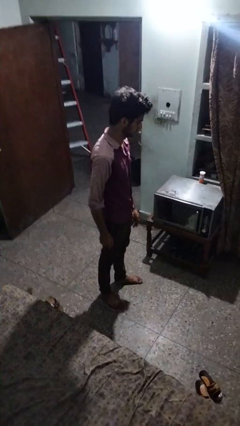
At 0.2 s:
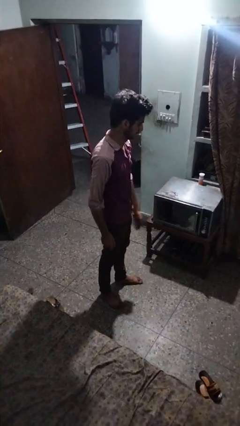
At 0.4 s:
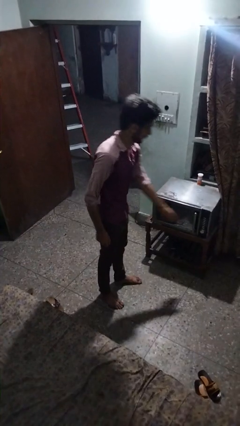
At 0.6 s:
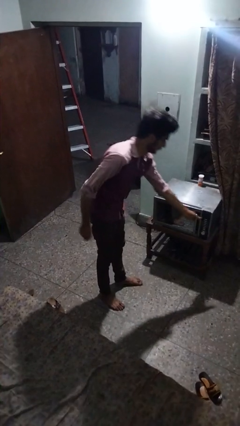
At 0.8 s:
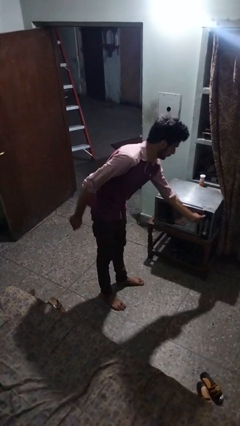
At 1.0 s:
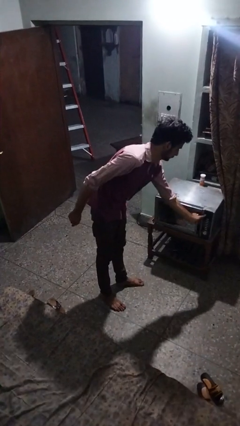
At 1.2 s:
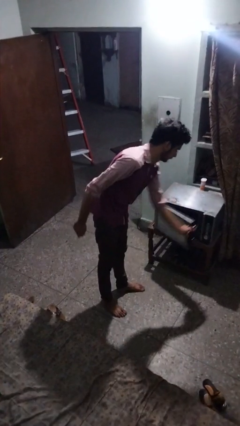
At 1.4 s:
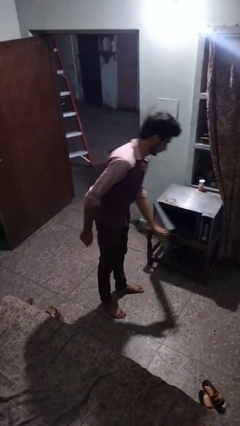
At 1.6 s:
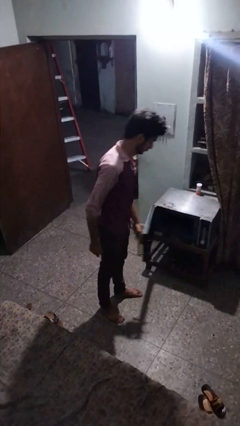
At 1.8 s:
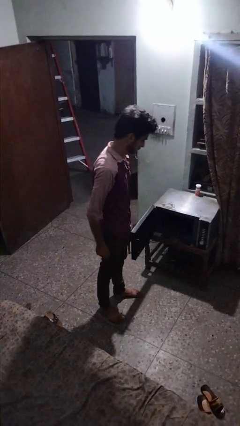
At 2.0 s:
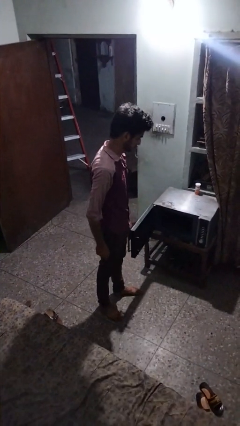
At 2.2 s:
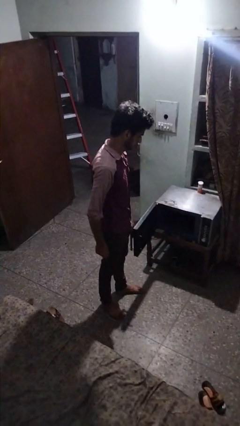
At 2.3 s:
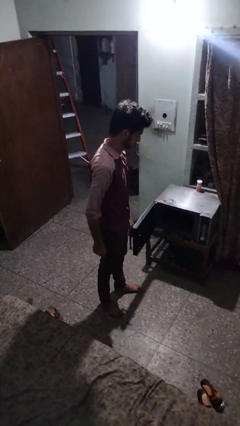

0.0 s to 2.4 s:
person opens microwave

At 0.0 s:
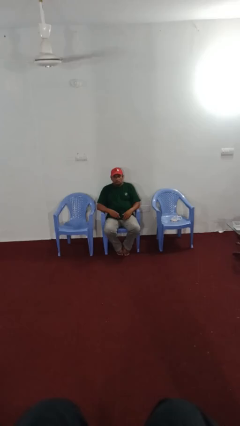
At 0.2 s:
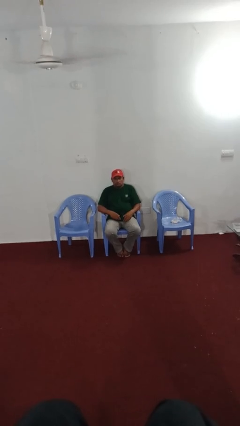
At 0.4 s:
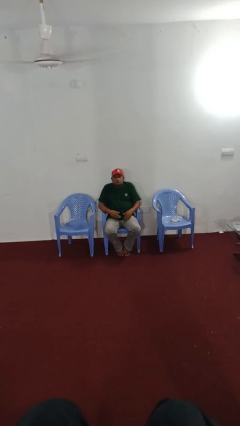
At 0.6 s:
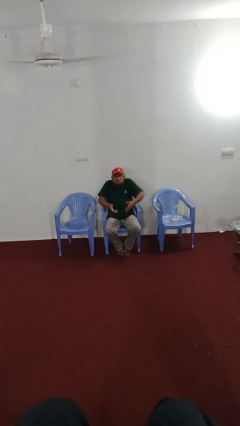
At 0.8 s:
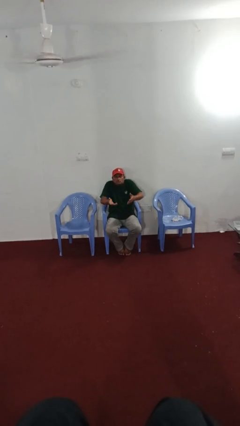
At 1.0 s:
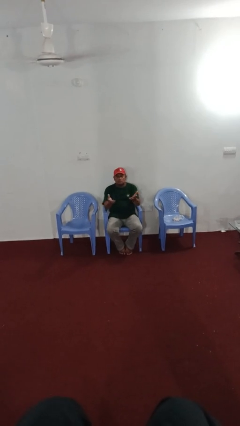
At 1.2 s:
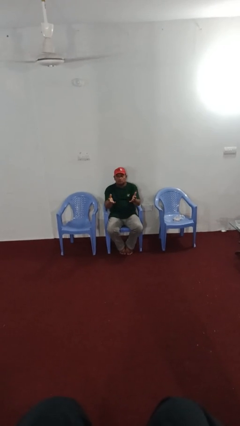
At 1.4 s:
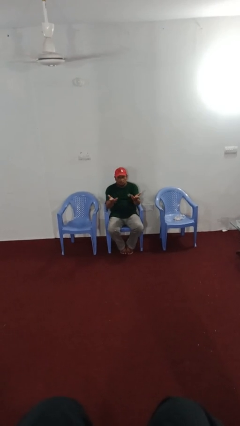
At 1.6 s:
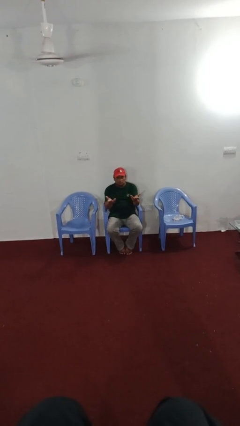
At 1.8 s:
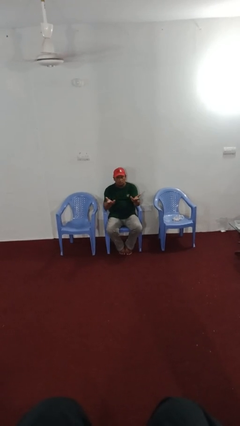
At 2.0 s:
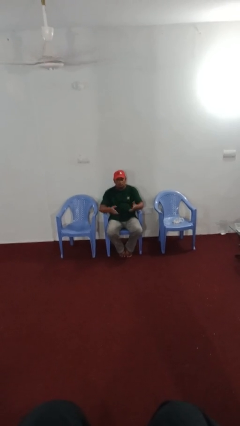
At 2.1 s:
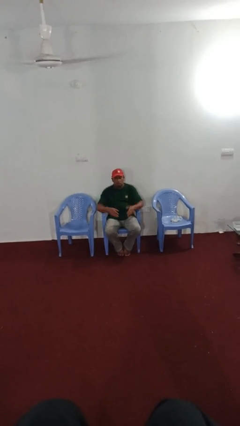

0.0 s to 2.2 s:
person shrugs

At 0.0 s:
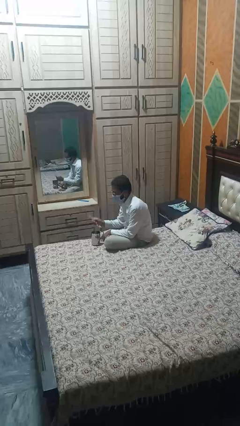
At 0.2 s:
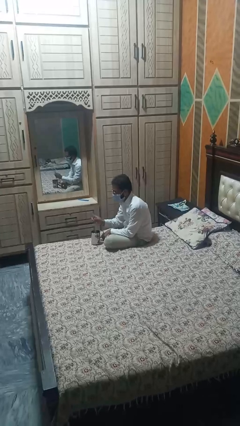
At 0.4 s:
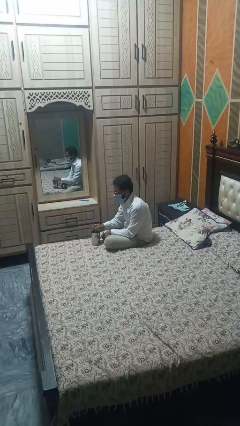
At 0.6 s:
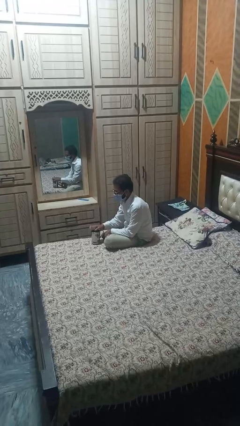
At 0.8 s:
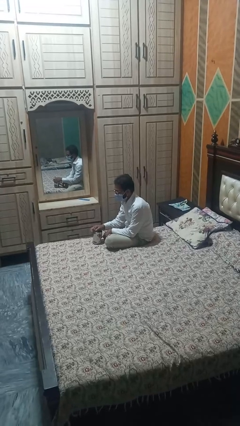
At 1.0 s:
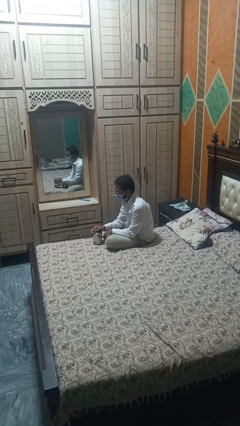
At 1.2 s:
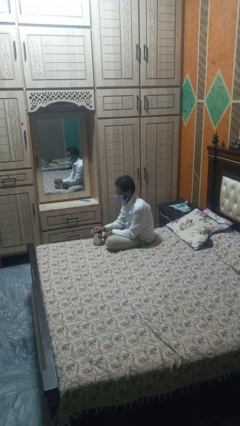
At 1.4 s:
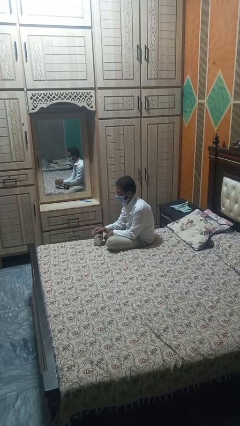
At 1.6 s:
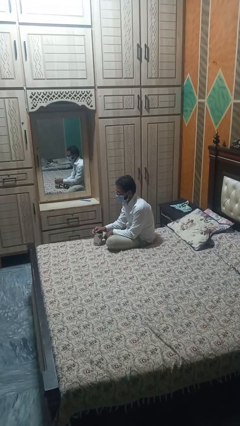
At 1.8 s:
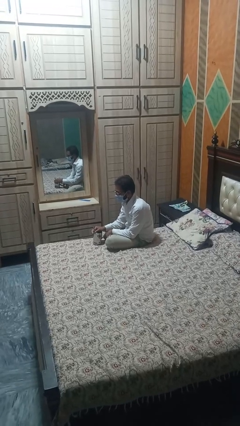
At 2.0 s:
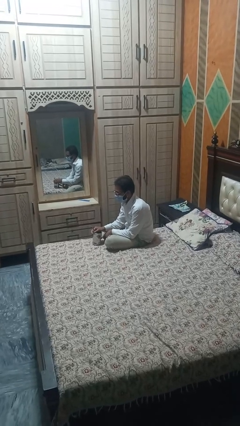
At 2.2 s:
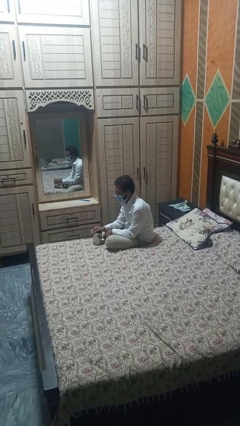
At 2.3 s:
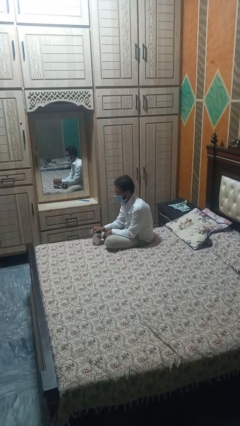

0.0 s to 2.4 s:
person stirs mug

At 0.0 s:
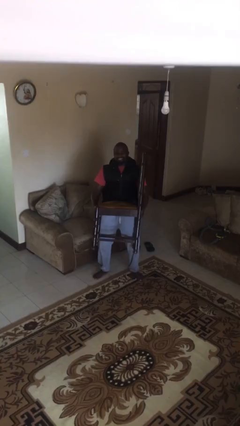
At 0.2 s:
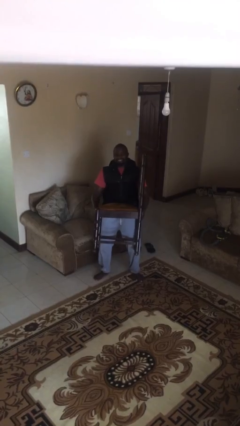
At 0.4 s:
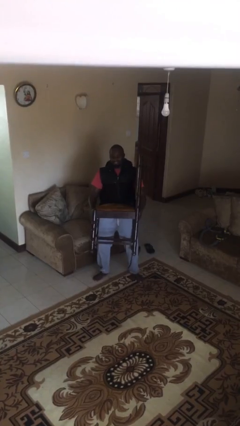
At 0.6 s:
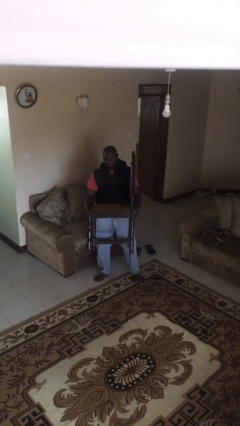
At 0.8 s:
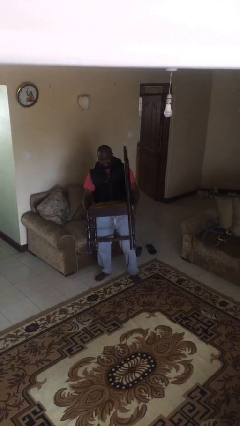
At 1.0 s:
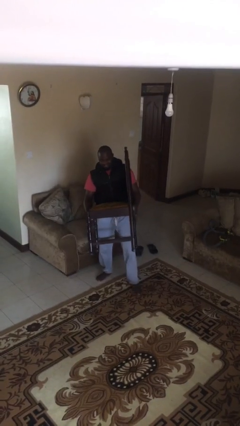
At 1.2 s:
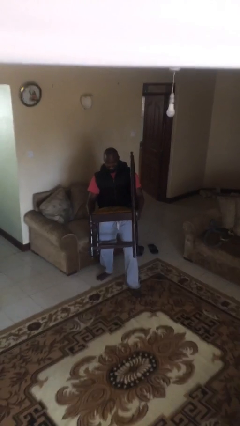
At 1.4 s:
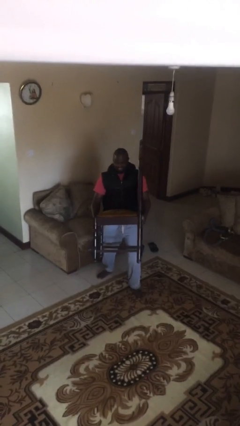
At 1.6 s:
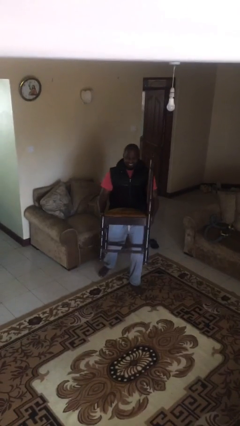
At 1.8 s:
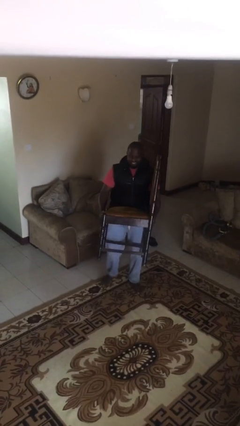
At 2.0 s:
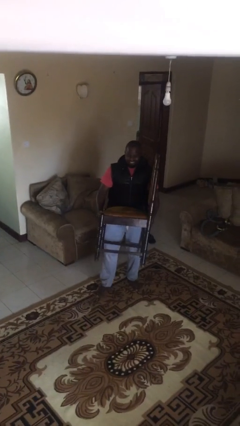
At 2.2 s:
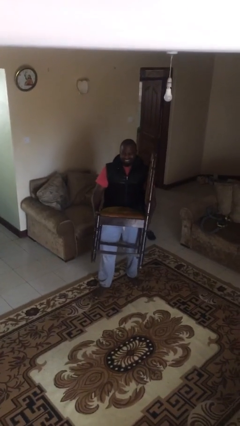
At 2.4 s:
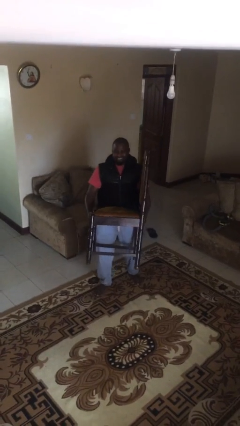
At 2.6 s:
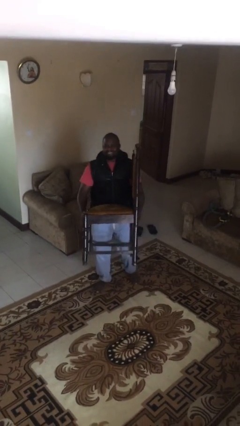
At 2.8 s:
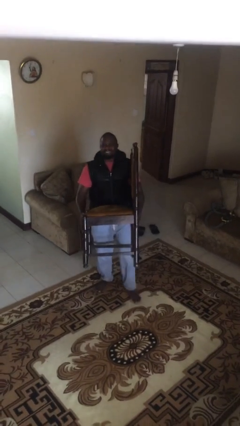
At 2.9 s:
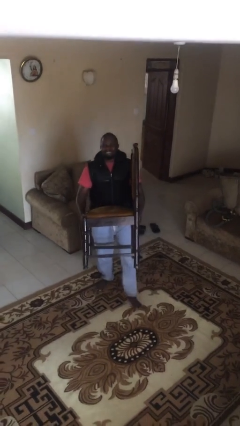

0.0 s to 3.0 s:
person carries heavy object

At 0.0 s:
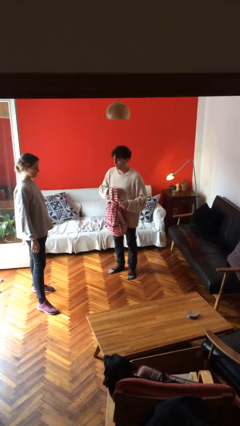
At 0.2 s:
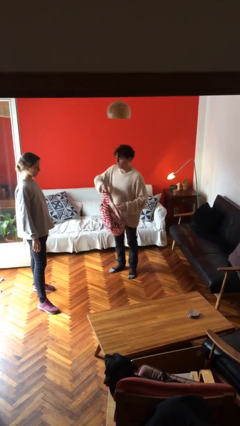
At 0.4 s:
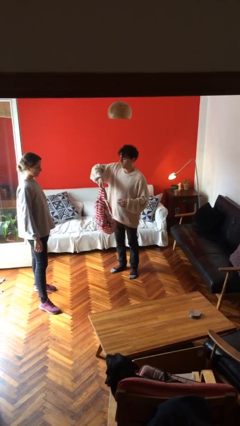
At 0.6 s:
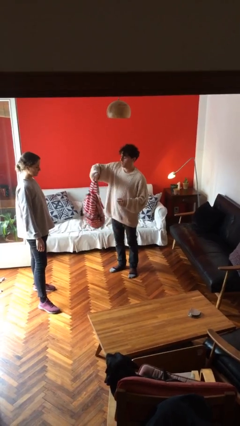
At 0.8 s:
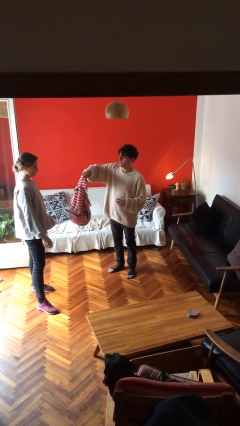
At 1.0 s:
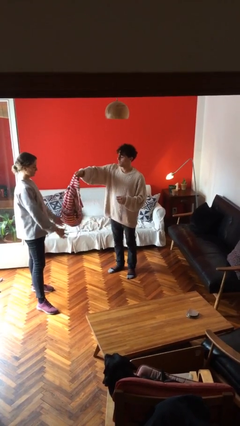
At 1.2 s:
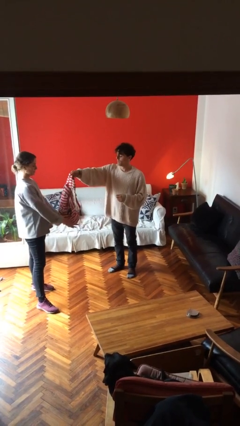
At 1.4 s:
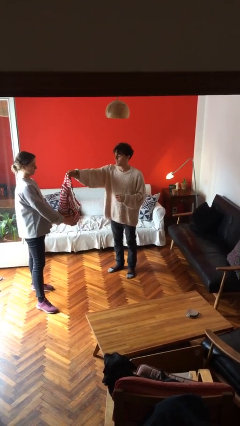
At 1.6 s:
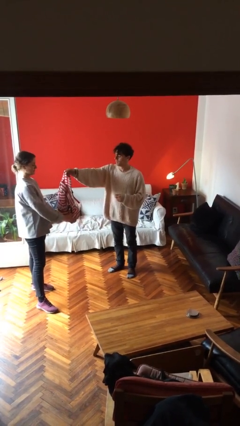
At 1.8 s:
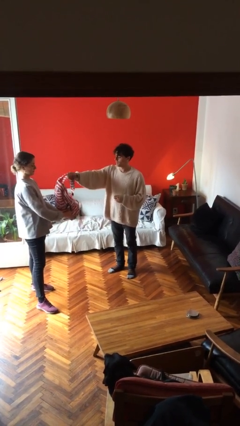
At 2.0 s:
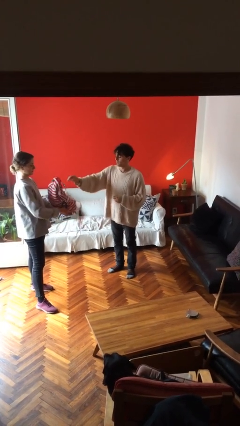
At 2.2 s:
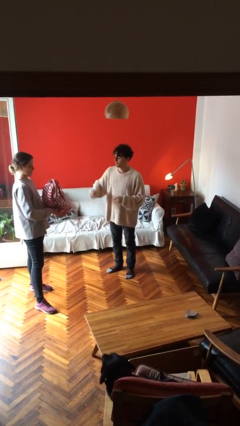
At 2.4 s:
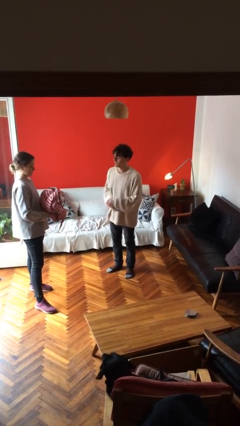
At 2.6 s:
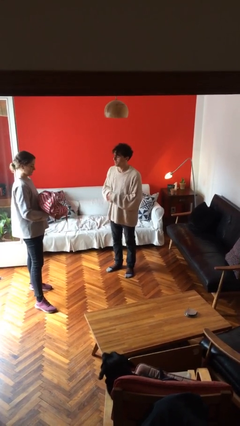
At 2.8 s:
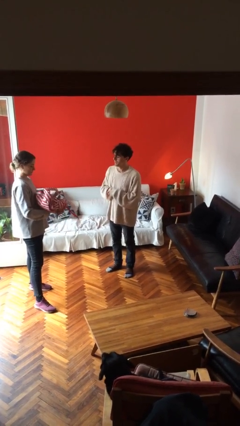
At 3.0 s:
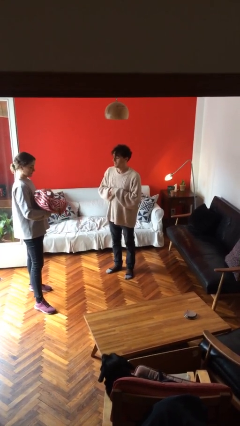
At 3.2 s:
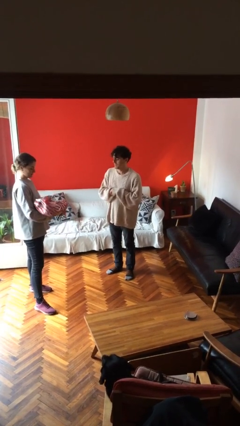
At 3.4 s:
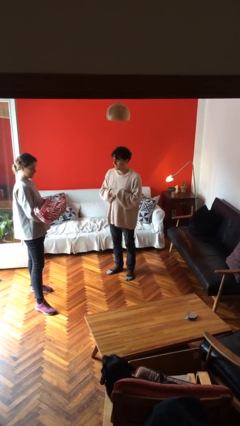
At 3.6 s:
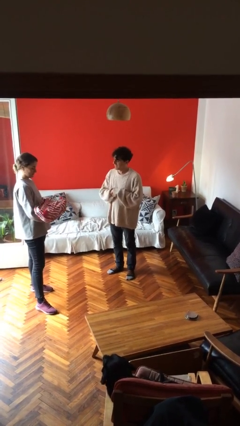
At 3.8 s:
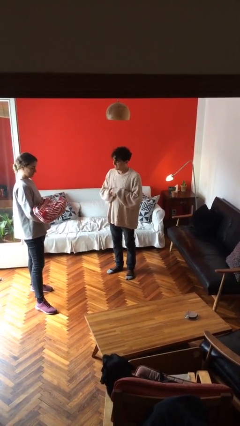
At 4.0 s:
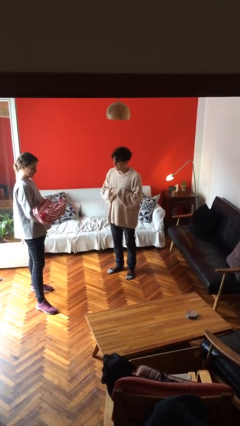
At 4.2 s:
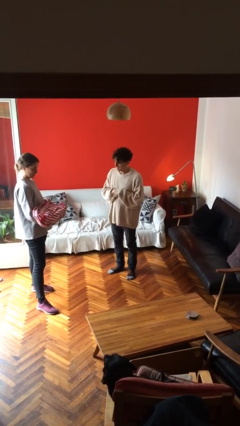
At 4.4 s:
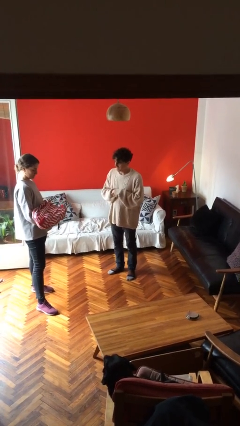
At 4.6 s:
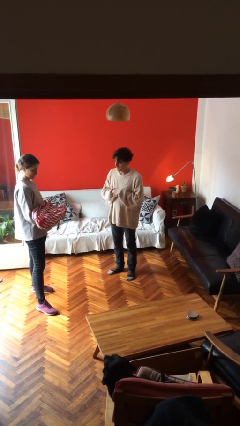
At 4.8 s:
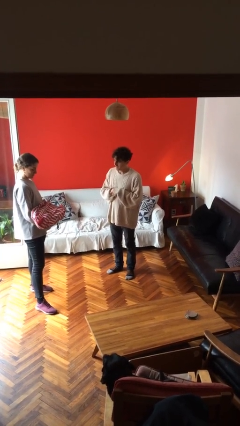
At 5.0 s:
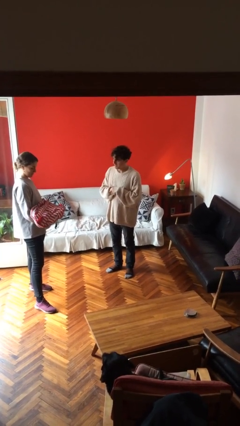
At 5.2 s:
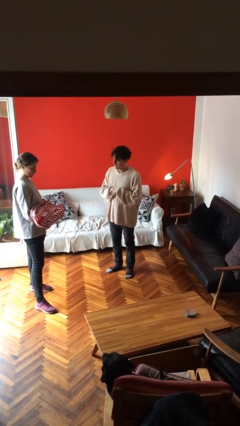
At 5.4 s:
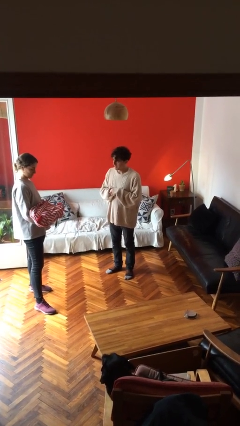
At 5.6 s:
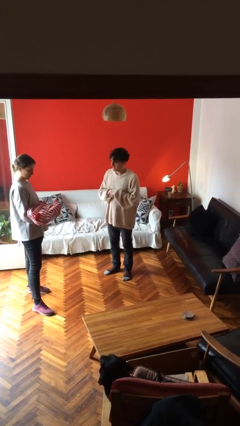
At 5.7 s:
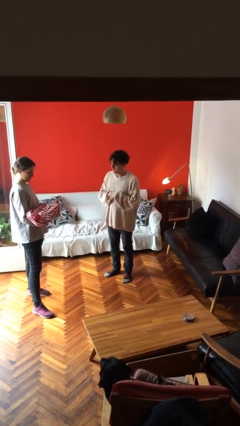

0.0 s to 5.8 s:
person transfers object to person

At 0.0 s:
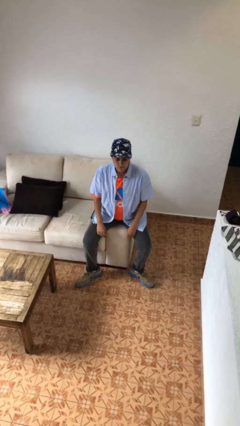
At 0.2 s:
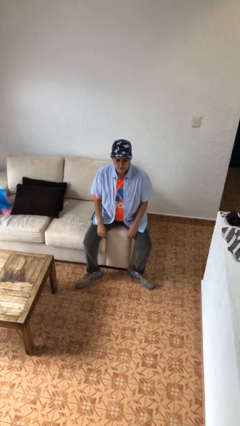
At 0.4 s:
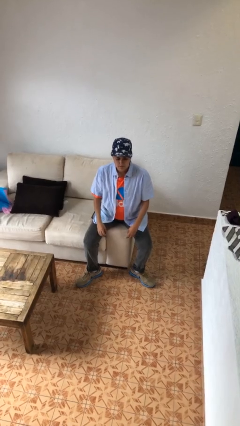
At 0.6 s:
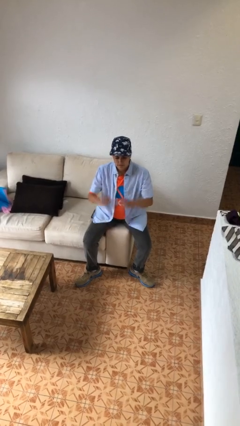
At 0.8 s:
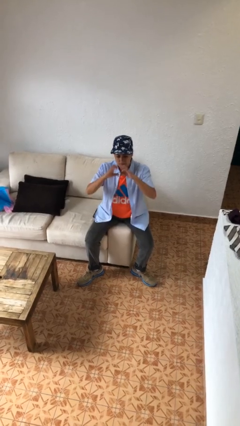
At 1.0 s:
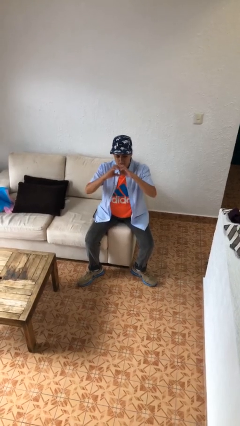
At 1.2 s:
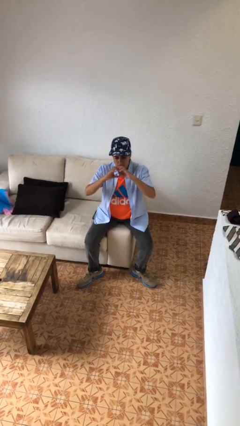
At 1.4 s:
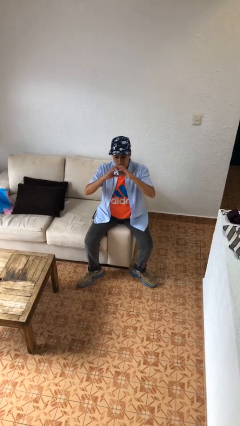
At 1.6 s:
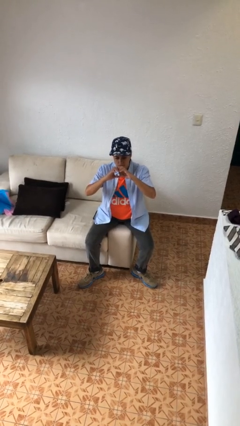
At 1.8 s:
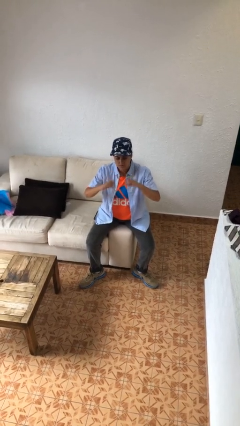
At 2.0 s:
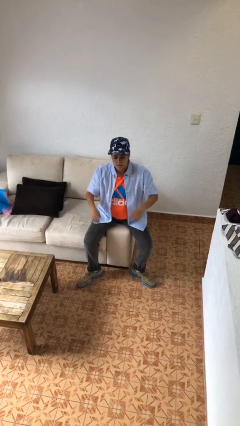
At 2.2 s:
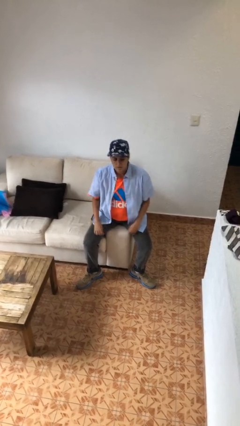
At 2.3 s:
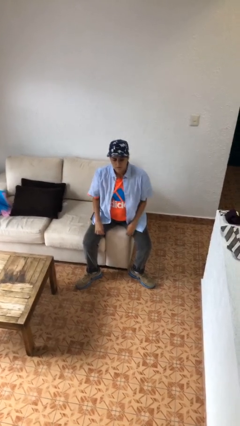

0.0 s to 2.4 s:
person gestures heart
